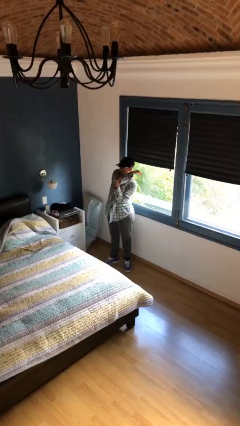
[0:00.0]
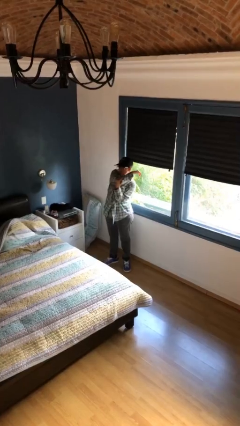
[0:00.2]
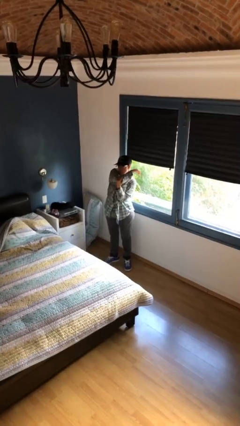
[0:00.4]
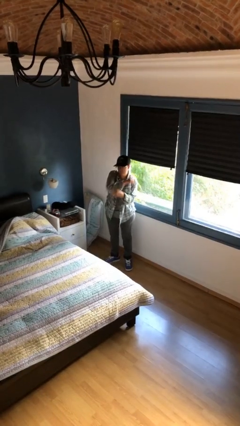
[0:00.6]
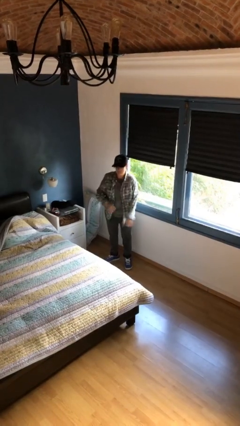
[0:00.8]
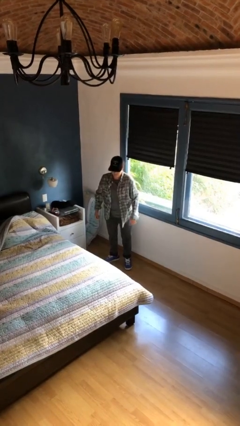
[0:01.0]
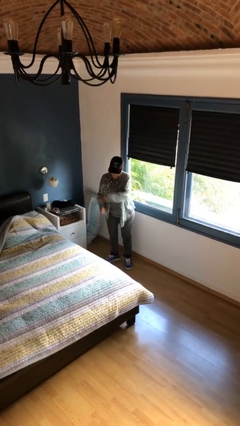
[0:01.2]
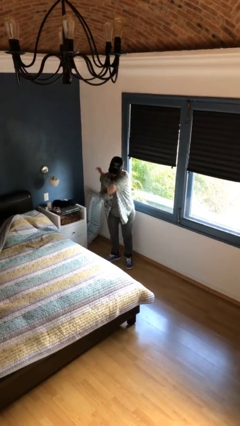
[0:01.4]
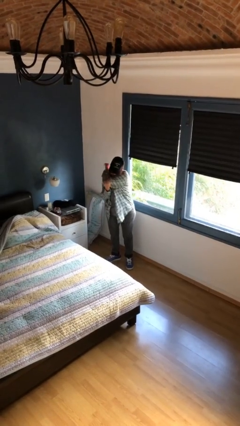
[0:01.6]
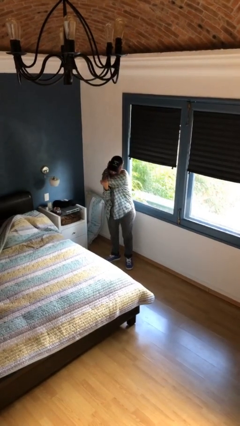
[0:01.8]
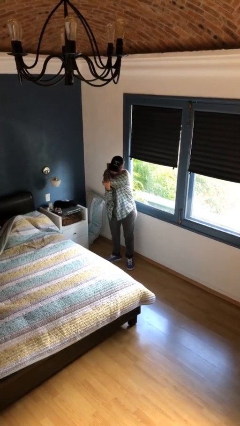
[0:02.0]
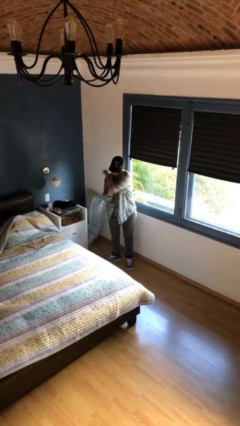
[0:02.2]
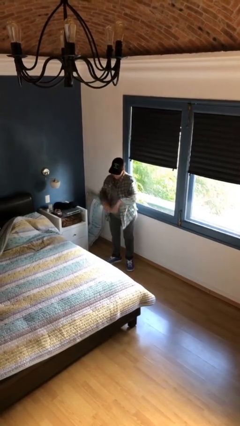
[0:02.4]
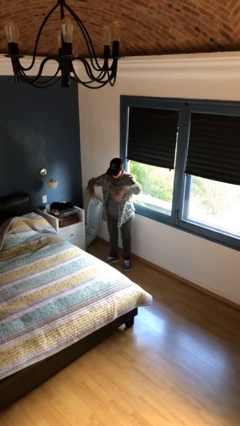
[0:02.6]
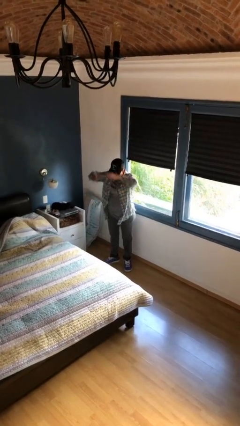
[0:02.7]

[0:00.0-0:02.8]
person stretches arms to side

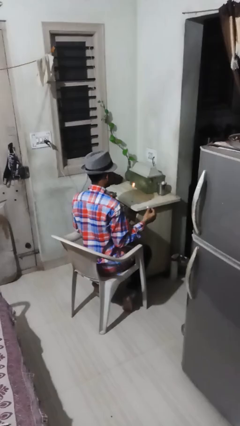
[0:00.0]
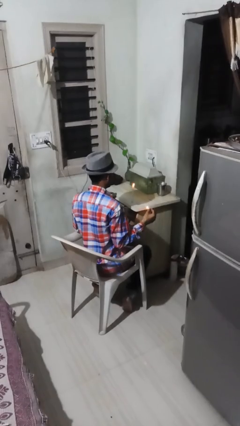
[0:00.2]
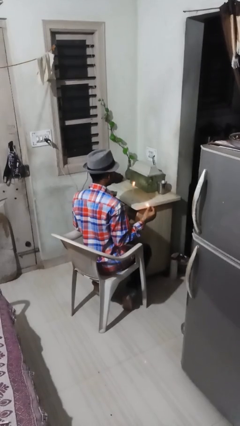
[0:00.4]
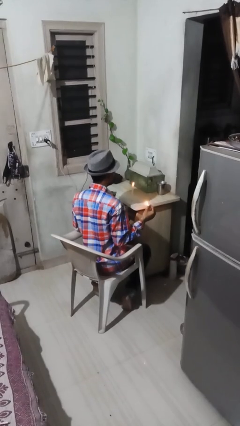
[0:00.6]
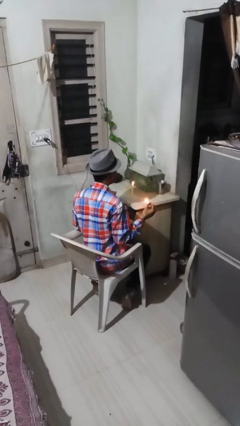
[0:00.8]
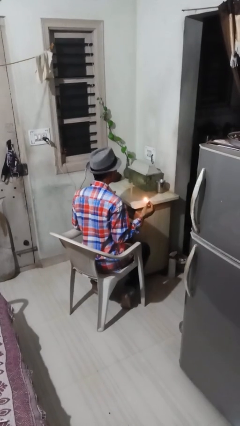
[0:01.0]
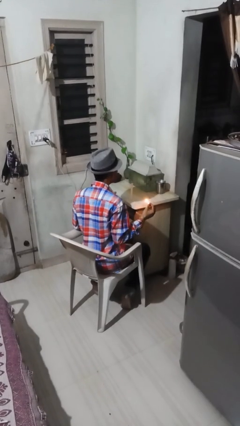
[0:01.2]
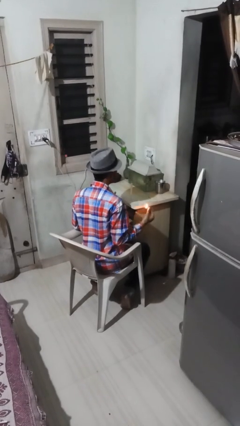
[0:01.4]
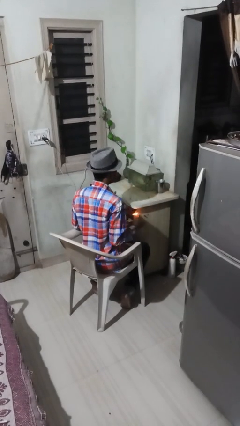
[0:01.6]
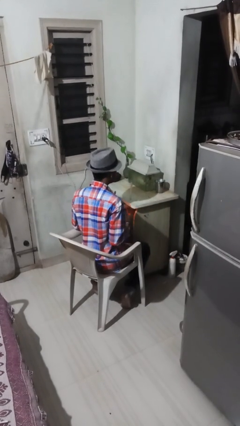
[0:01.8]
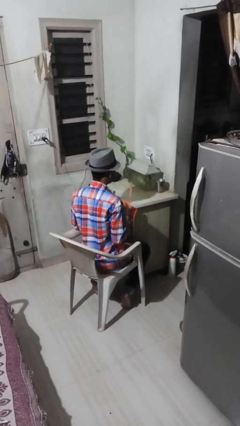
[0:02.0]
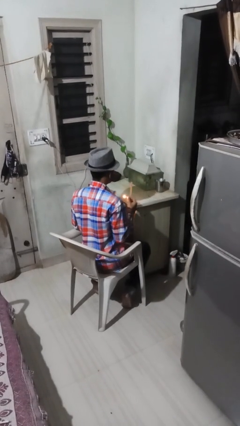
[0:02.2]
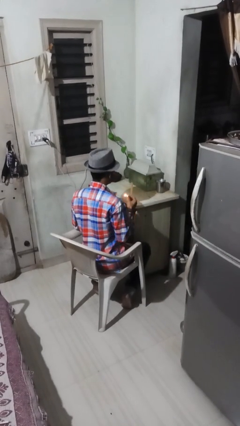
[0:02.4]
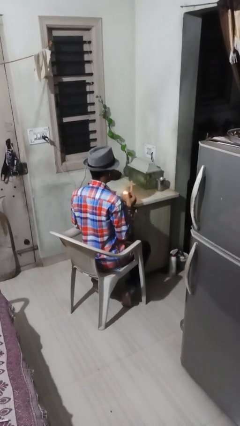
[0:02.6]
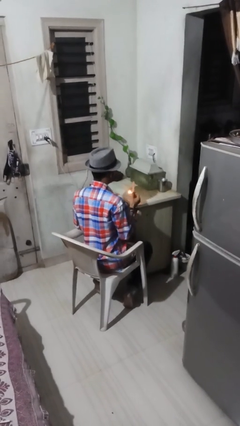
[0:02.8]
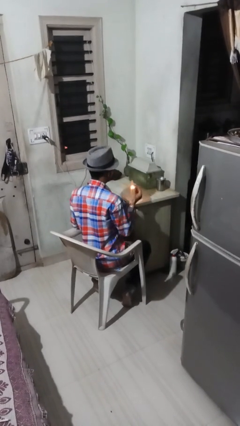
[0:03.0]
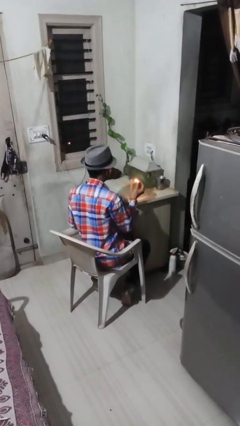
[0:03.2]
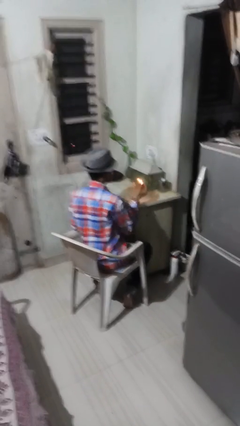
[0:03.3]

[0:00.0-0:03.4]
person extinguishes candle

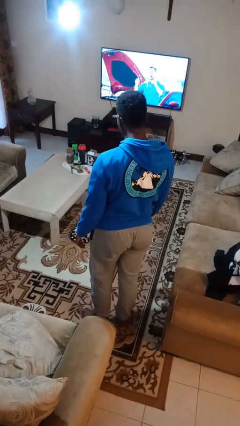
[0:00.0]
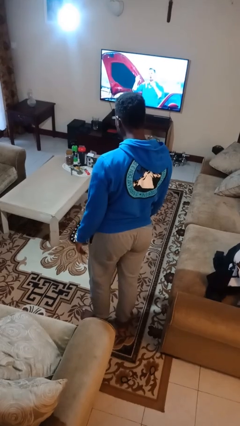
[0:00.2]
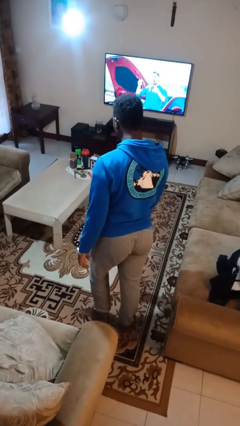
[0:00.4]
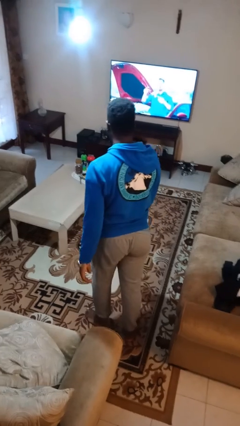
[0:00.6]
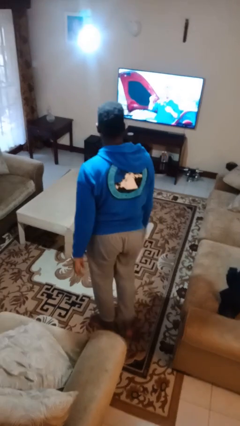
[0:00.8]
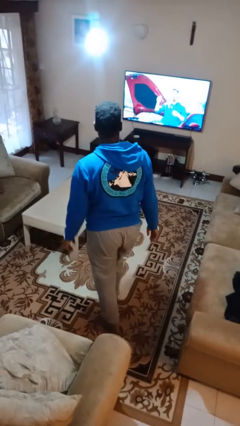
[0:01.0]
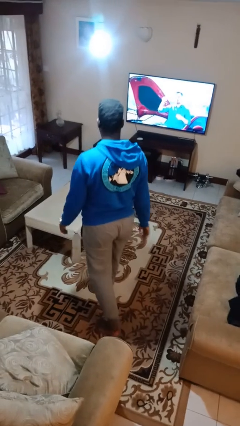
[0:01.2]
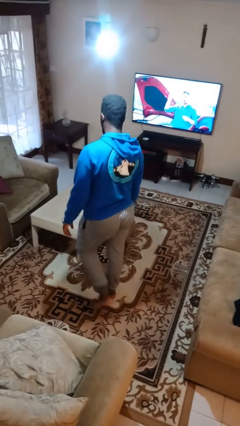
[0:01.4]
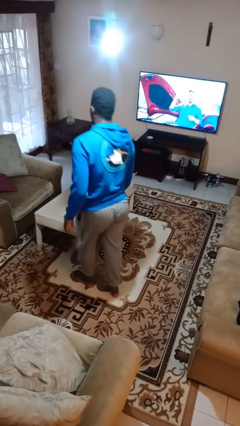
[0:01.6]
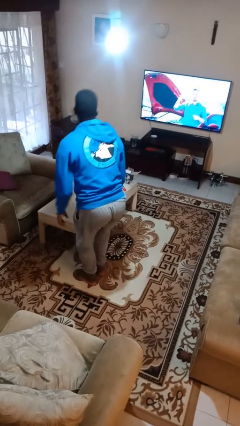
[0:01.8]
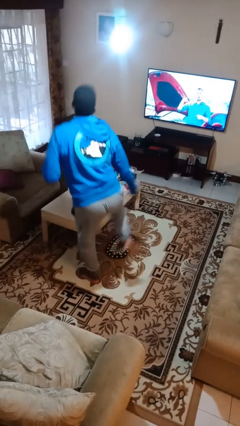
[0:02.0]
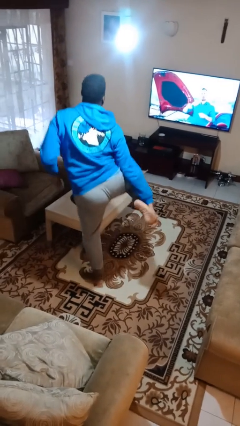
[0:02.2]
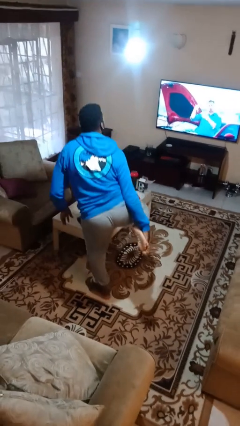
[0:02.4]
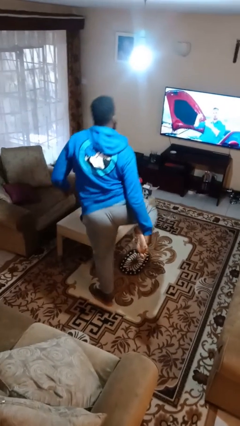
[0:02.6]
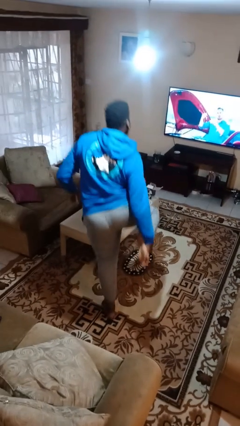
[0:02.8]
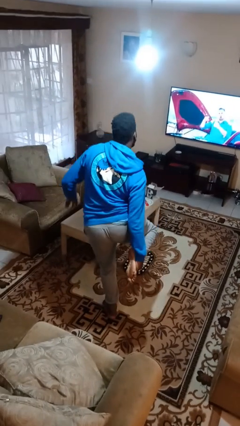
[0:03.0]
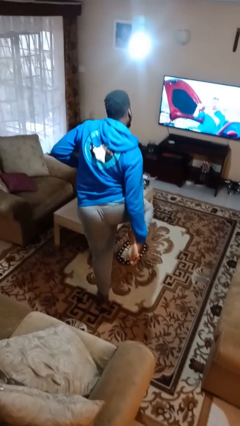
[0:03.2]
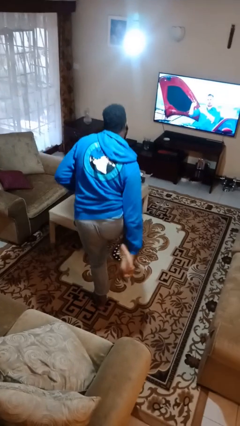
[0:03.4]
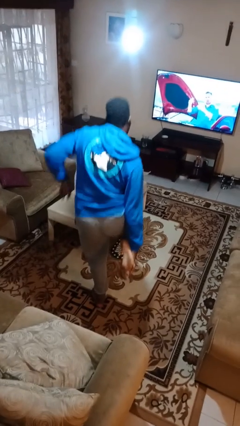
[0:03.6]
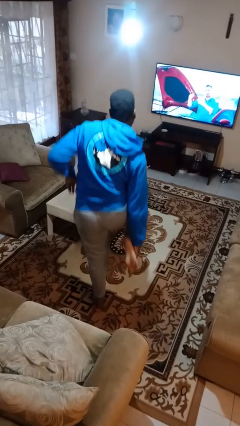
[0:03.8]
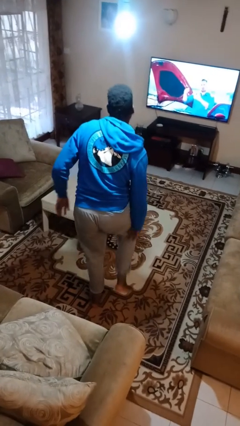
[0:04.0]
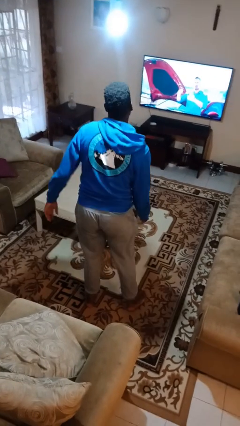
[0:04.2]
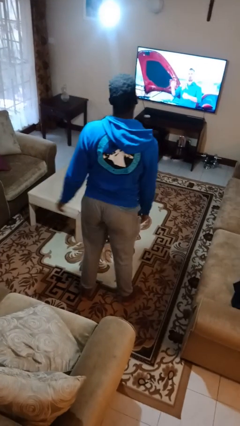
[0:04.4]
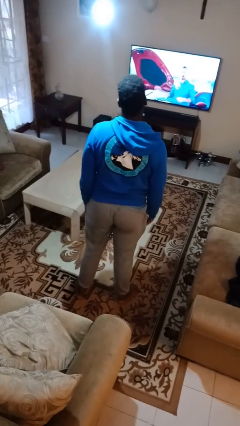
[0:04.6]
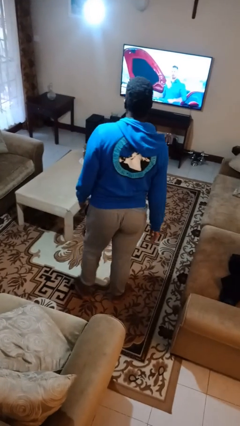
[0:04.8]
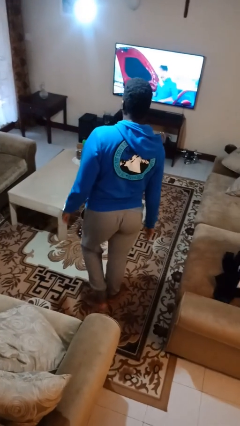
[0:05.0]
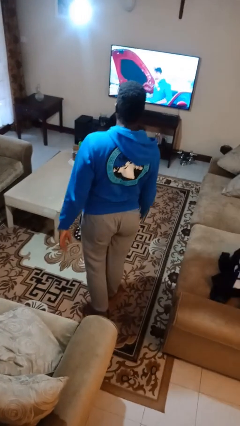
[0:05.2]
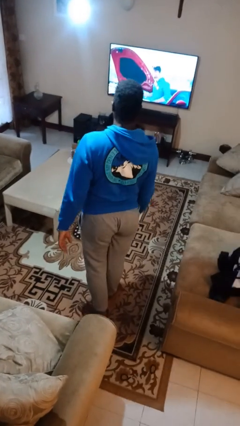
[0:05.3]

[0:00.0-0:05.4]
person stubs toe

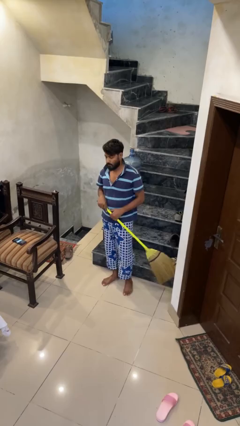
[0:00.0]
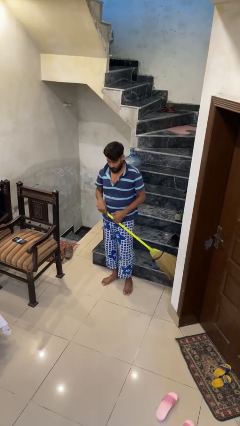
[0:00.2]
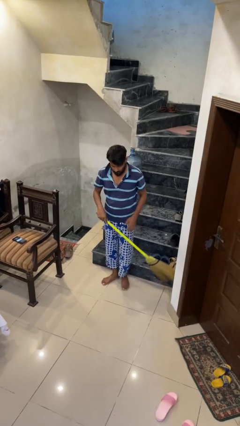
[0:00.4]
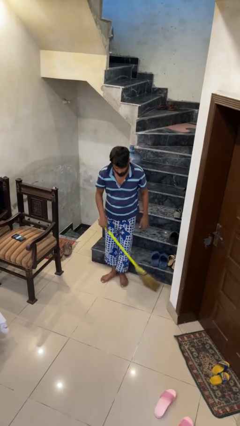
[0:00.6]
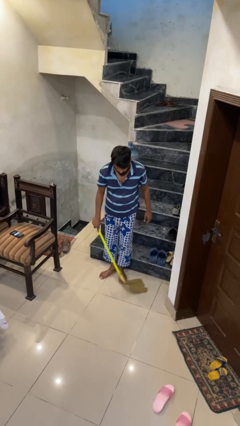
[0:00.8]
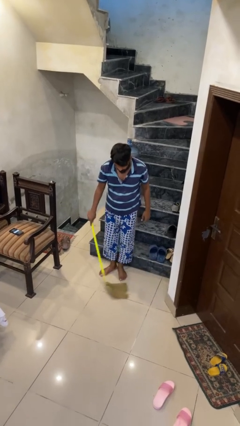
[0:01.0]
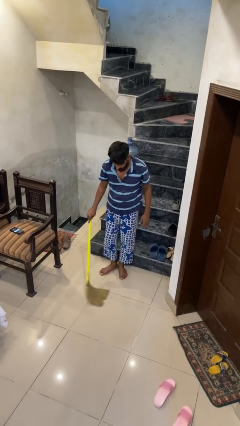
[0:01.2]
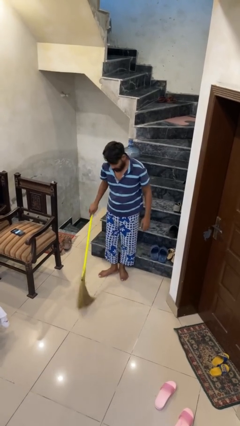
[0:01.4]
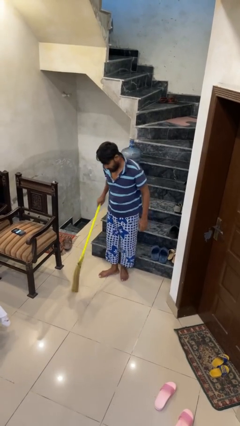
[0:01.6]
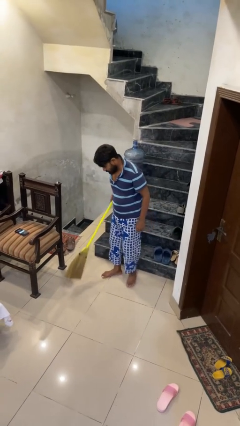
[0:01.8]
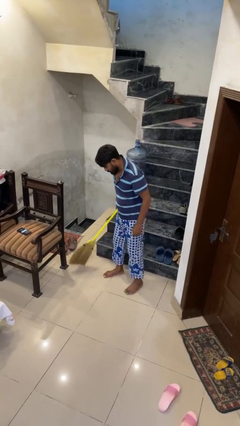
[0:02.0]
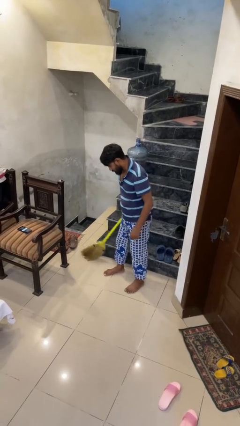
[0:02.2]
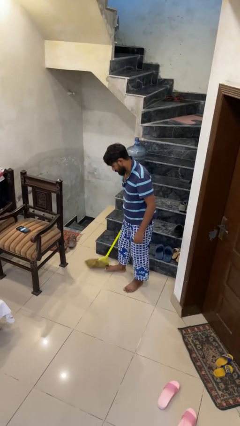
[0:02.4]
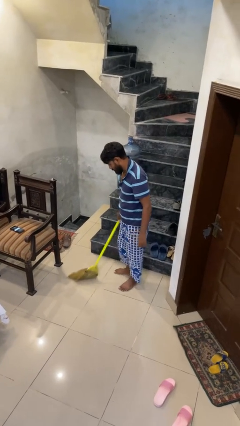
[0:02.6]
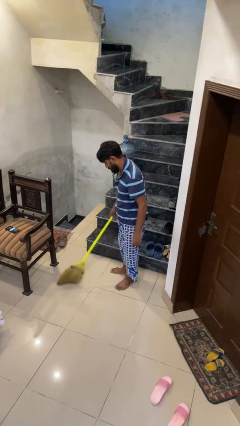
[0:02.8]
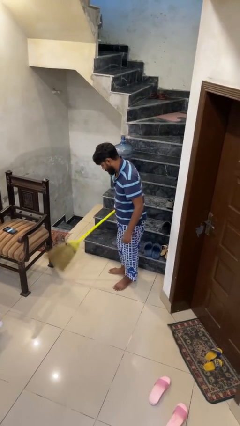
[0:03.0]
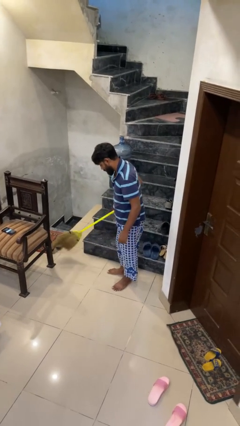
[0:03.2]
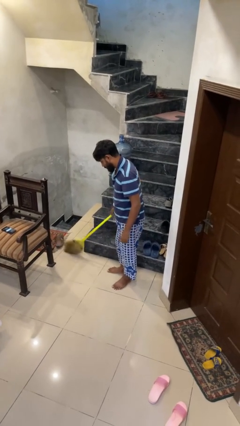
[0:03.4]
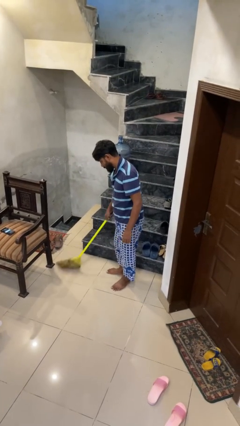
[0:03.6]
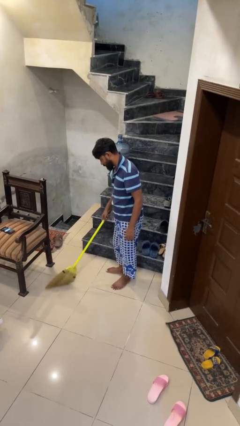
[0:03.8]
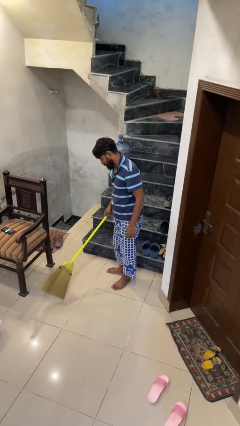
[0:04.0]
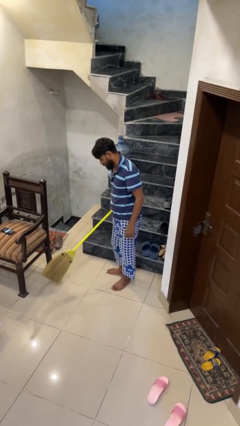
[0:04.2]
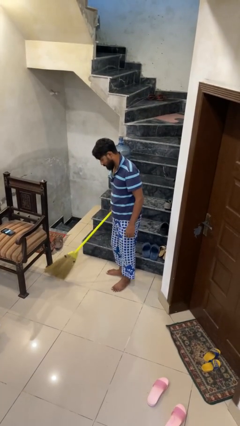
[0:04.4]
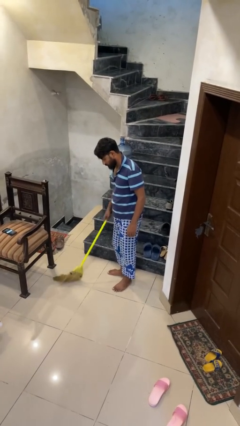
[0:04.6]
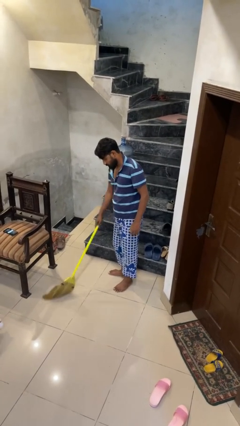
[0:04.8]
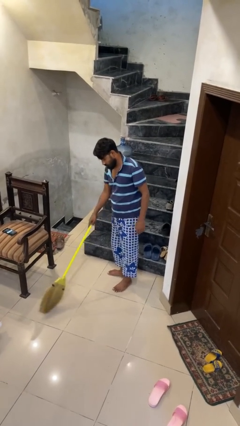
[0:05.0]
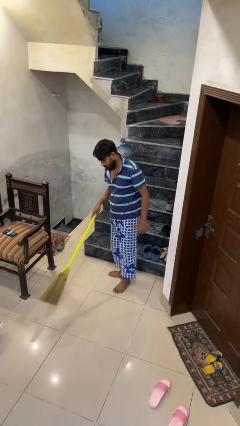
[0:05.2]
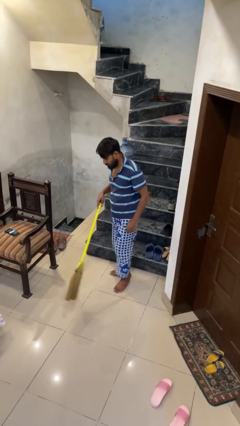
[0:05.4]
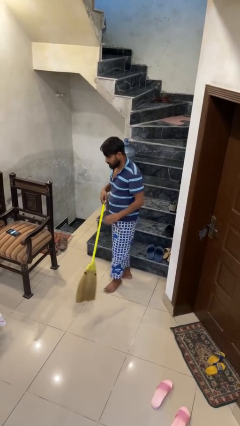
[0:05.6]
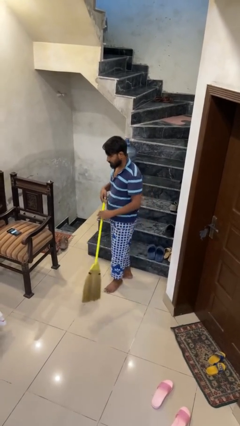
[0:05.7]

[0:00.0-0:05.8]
person sweeps floor

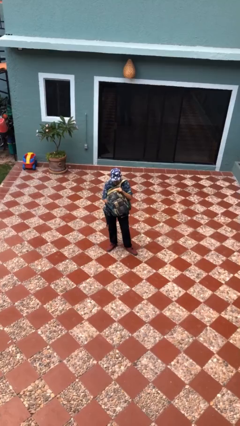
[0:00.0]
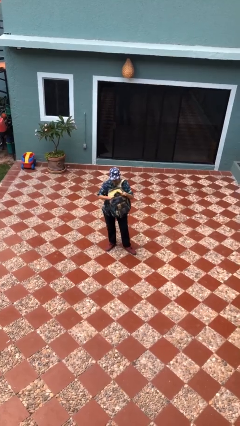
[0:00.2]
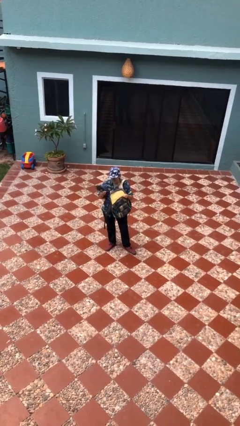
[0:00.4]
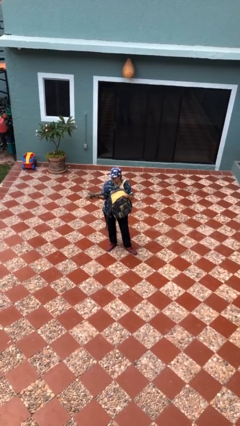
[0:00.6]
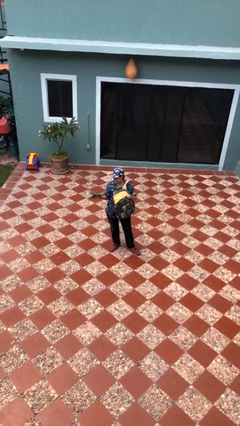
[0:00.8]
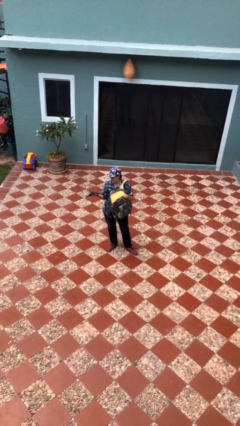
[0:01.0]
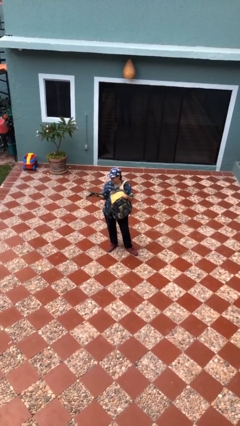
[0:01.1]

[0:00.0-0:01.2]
person takes object from backpack
